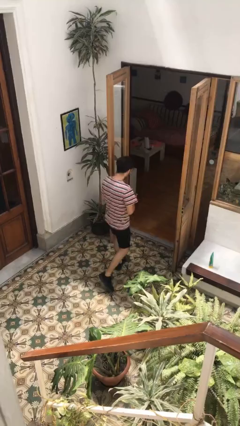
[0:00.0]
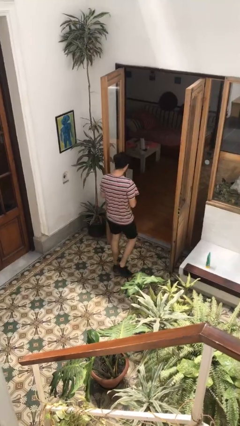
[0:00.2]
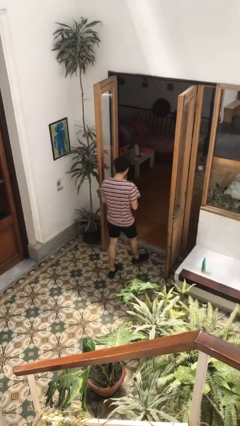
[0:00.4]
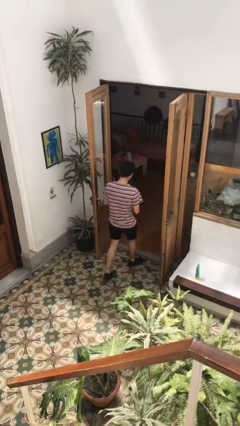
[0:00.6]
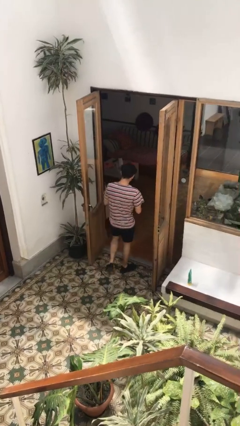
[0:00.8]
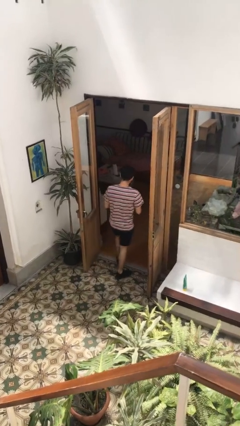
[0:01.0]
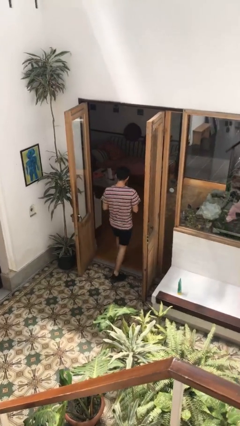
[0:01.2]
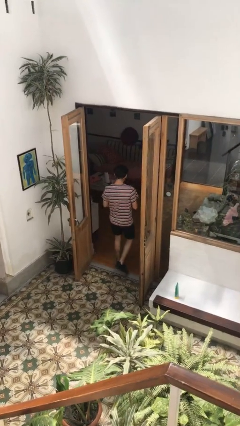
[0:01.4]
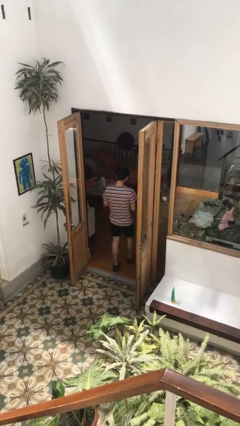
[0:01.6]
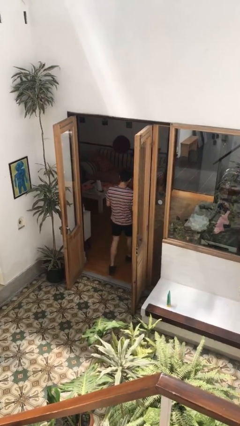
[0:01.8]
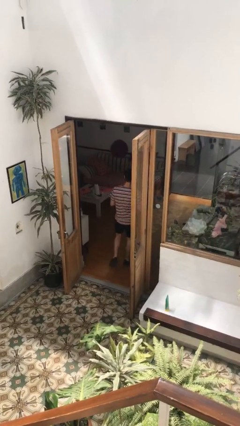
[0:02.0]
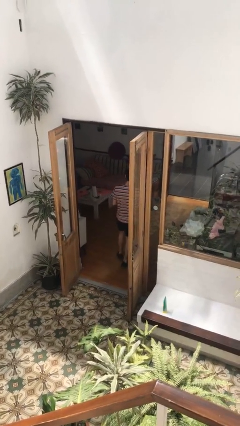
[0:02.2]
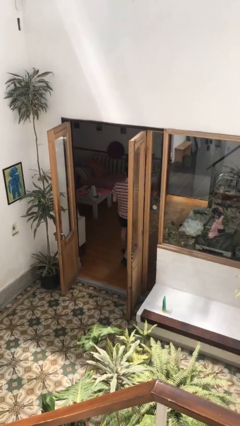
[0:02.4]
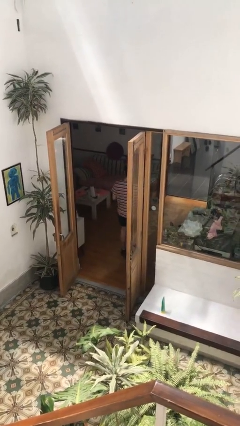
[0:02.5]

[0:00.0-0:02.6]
person exits scene through structure

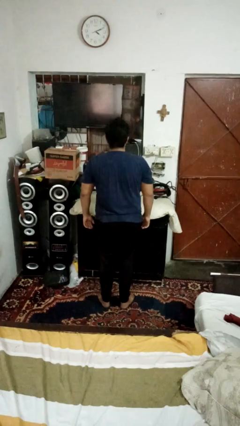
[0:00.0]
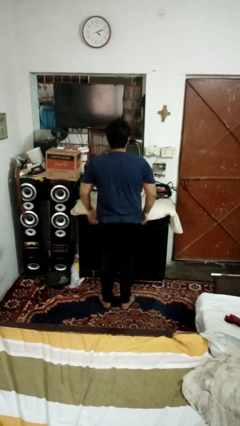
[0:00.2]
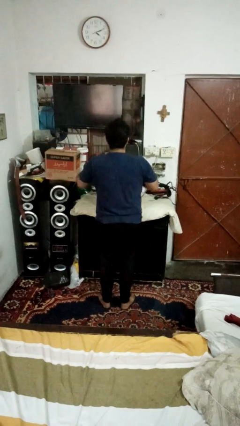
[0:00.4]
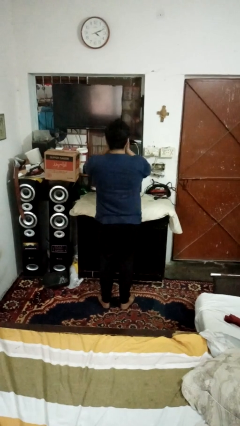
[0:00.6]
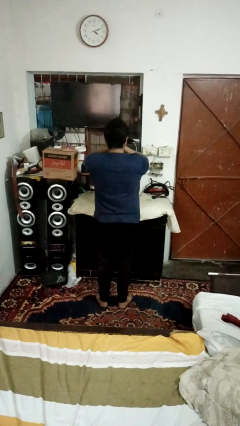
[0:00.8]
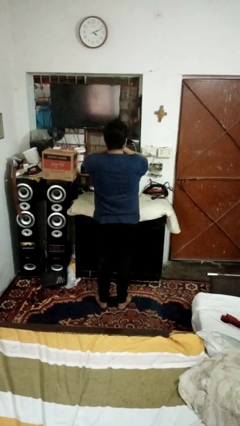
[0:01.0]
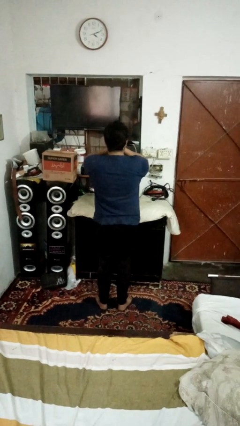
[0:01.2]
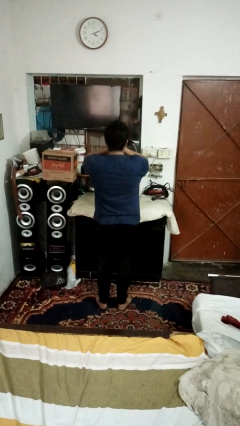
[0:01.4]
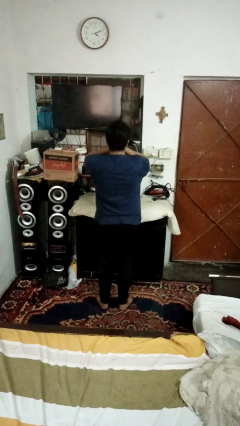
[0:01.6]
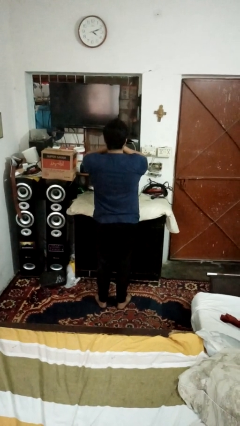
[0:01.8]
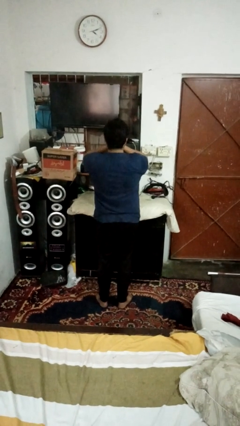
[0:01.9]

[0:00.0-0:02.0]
person covers face with hands

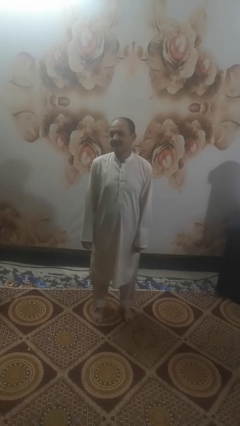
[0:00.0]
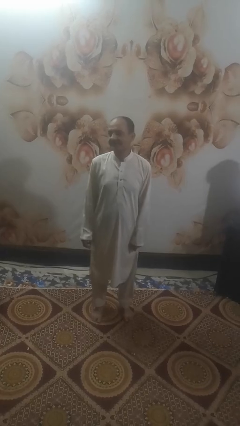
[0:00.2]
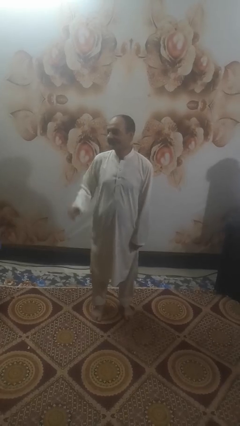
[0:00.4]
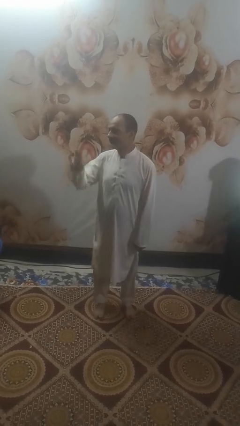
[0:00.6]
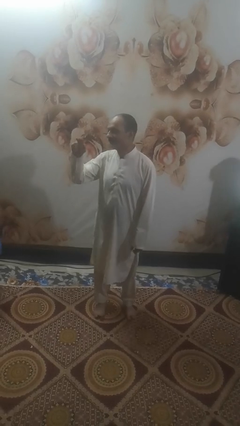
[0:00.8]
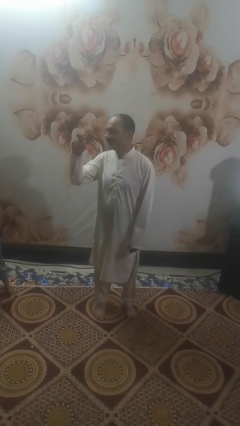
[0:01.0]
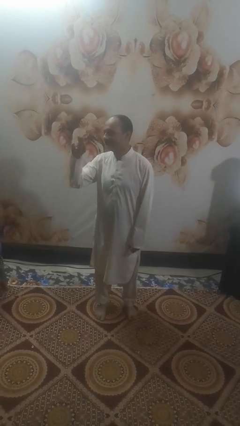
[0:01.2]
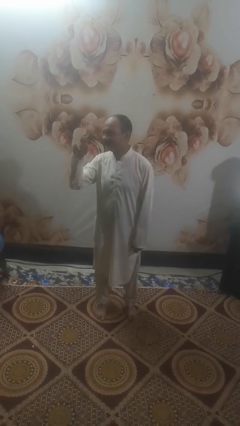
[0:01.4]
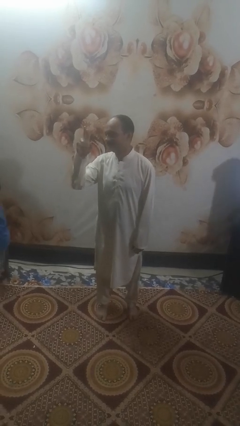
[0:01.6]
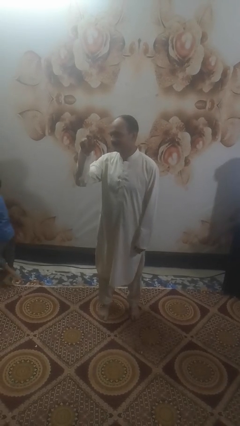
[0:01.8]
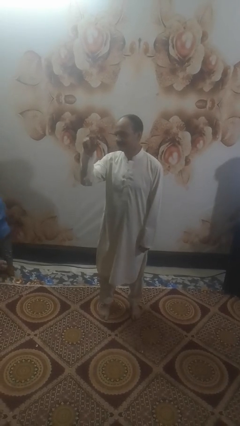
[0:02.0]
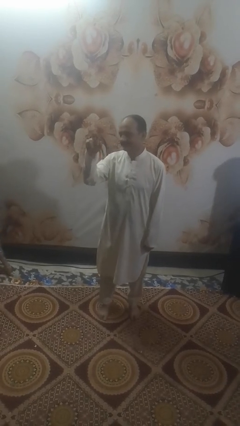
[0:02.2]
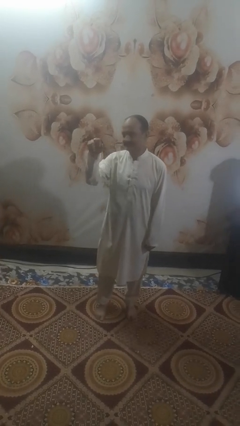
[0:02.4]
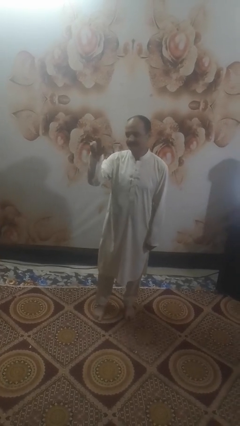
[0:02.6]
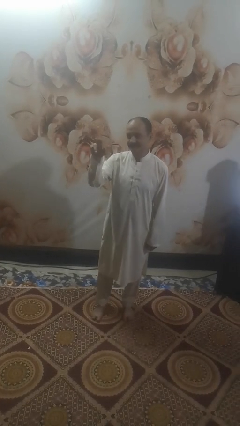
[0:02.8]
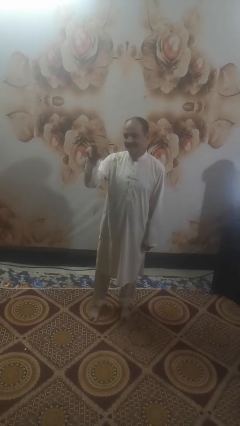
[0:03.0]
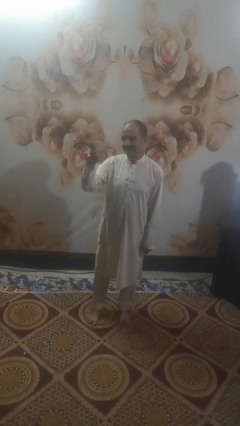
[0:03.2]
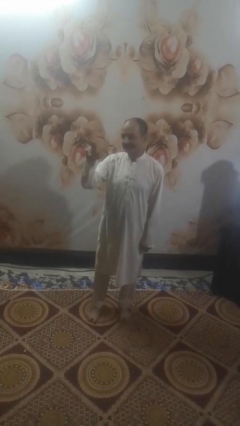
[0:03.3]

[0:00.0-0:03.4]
person gestures come here

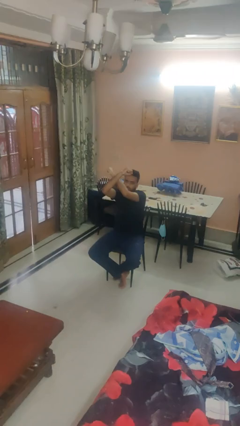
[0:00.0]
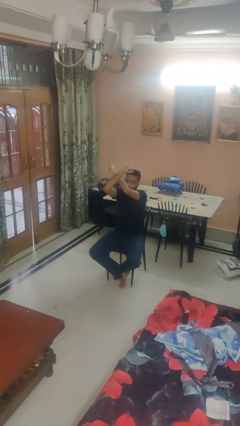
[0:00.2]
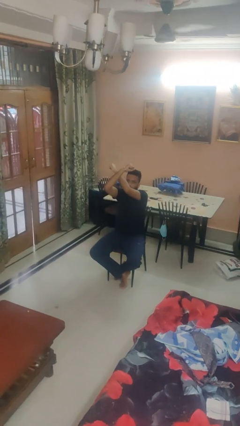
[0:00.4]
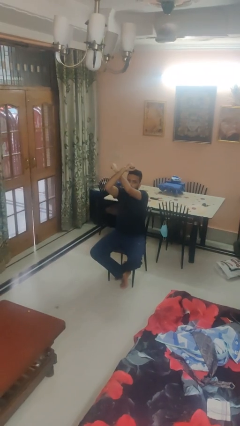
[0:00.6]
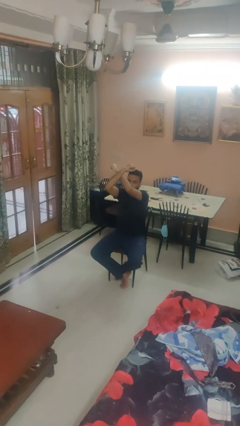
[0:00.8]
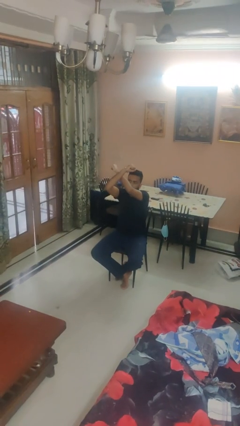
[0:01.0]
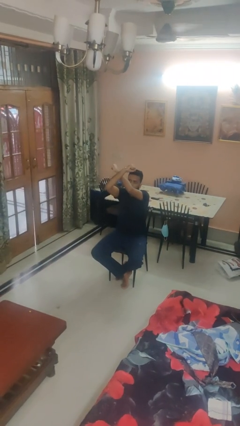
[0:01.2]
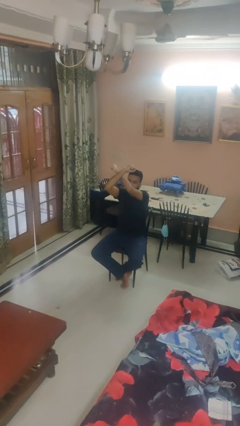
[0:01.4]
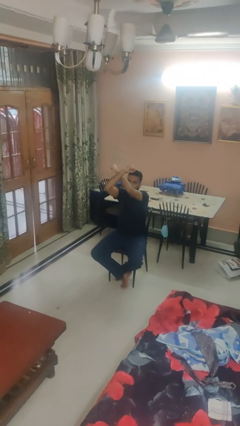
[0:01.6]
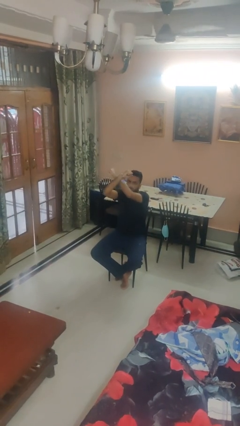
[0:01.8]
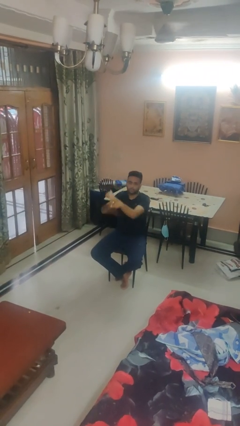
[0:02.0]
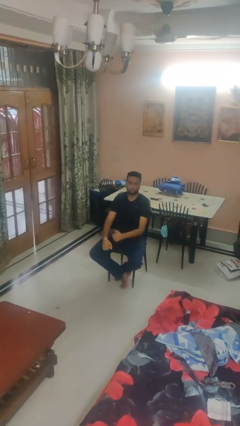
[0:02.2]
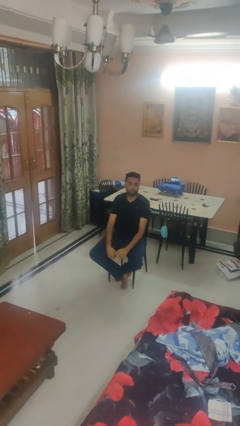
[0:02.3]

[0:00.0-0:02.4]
person gestures arms x

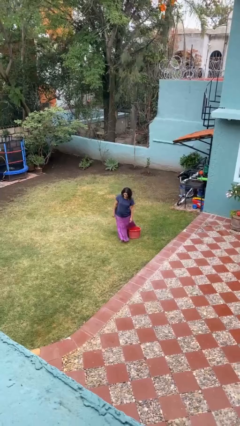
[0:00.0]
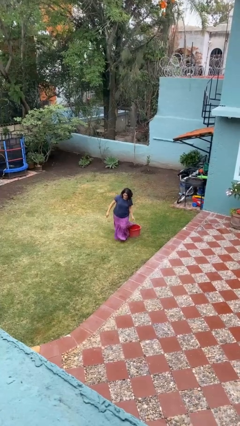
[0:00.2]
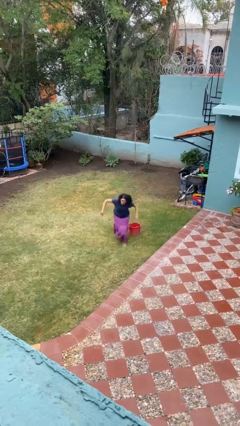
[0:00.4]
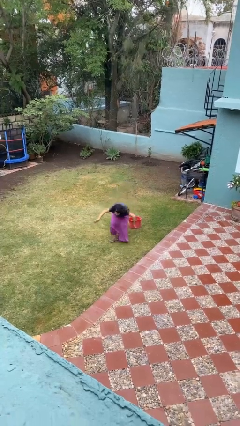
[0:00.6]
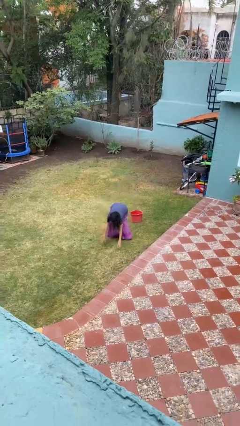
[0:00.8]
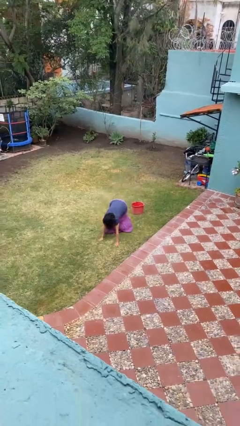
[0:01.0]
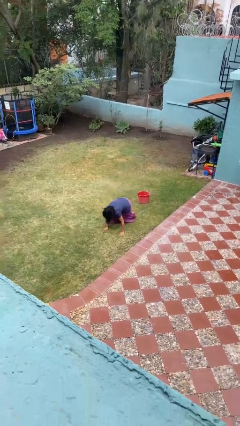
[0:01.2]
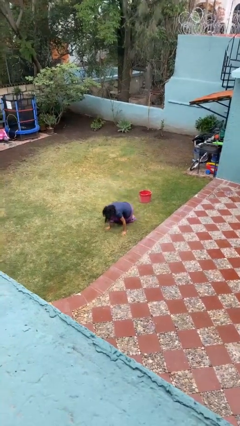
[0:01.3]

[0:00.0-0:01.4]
person trips on object on floor

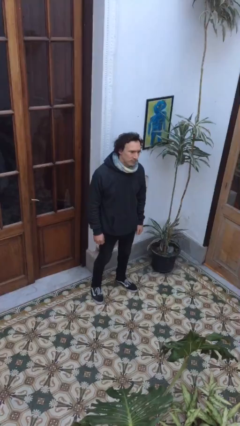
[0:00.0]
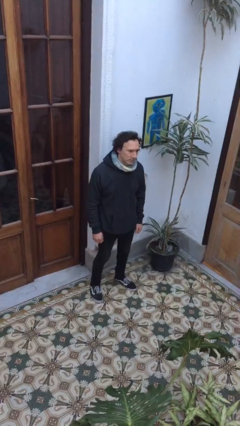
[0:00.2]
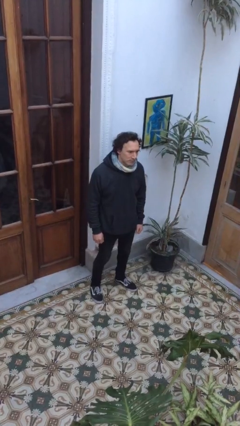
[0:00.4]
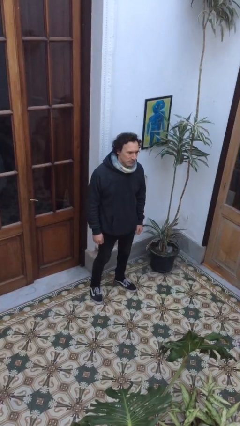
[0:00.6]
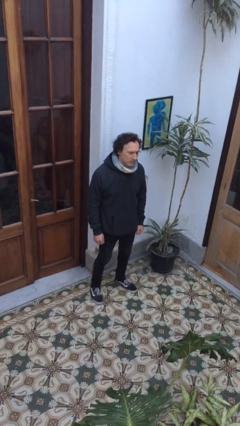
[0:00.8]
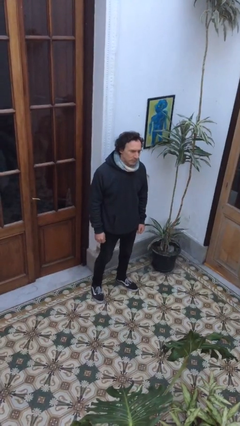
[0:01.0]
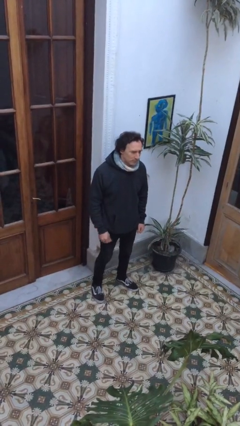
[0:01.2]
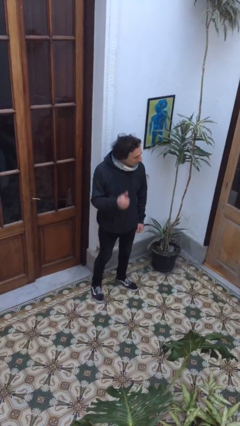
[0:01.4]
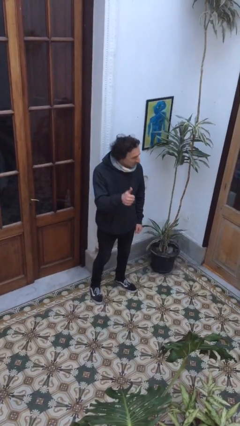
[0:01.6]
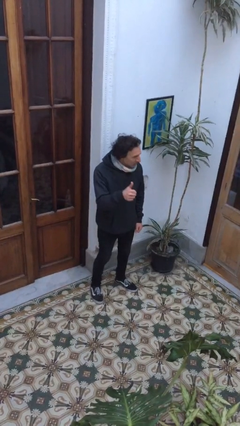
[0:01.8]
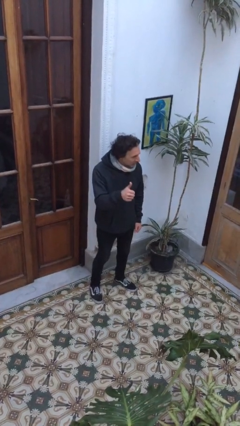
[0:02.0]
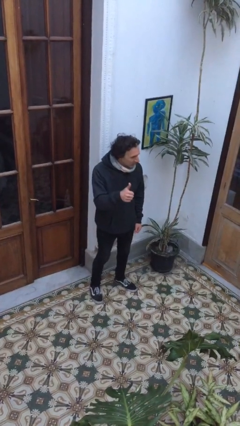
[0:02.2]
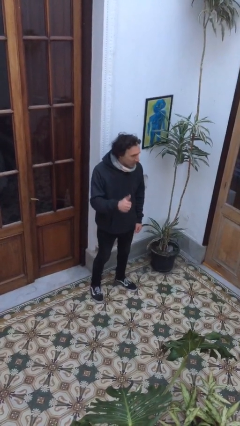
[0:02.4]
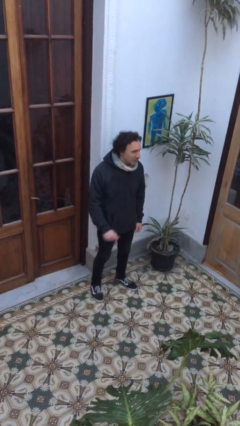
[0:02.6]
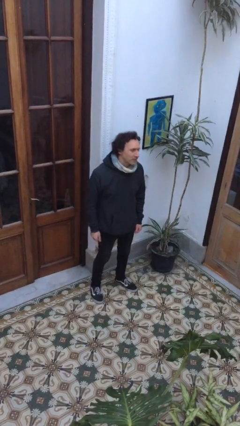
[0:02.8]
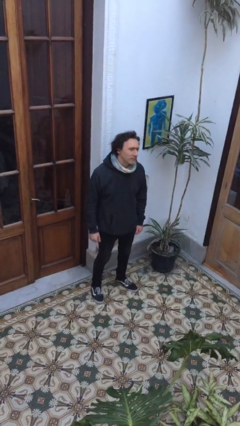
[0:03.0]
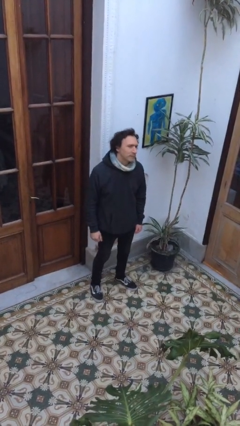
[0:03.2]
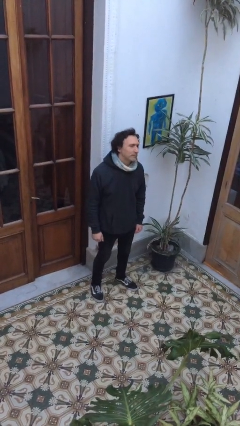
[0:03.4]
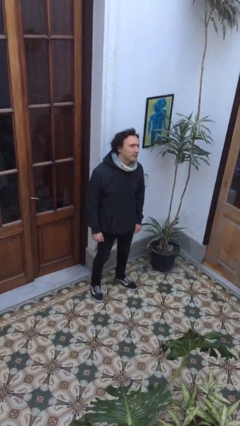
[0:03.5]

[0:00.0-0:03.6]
person gestures thumbs up

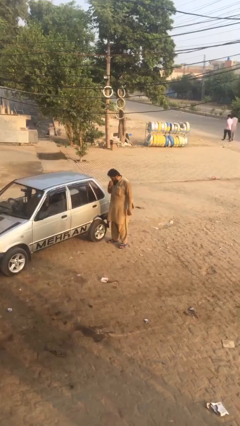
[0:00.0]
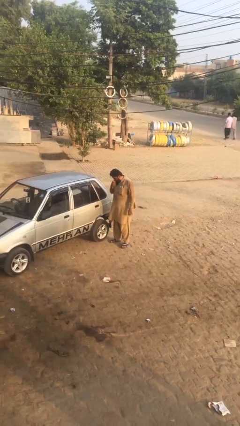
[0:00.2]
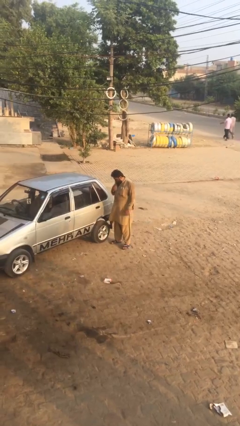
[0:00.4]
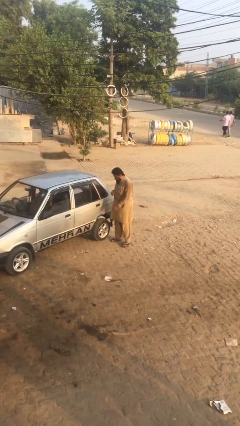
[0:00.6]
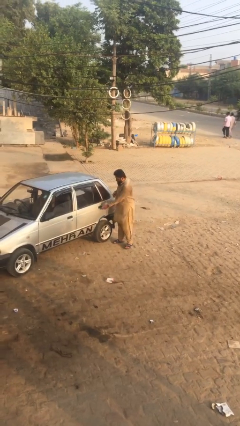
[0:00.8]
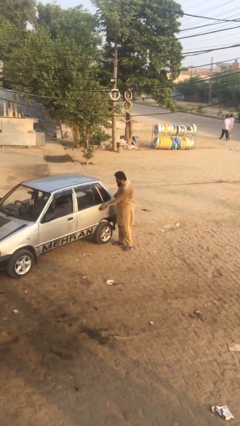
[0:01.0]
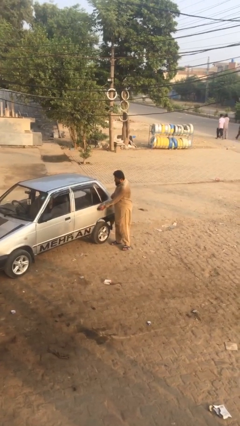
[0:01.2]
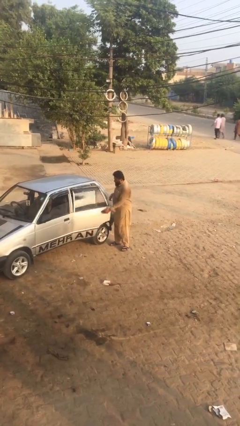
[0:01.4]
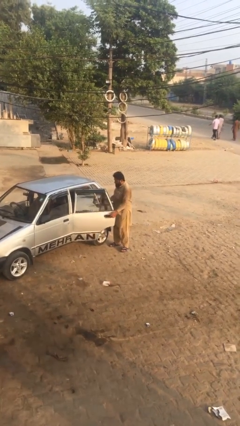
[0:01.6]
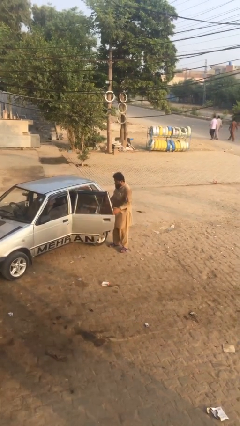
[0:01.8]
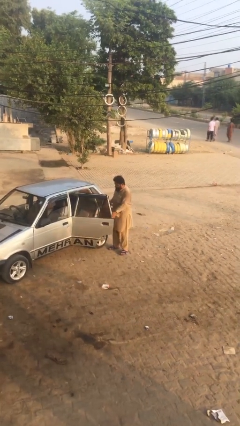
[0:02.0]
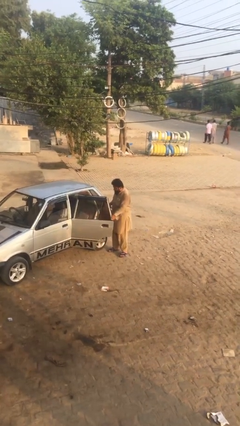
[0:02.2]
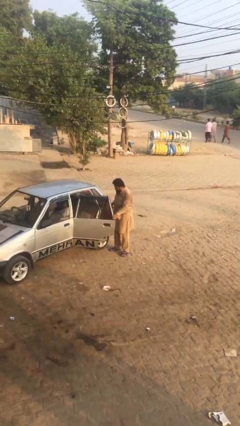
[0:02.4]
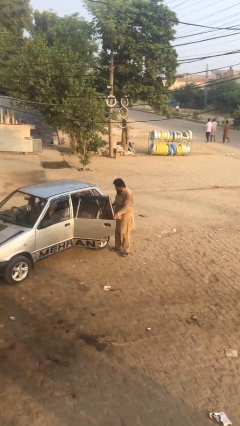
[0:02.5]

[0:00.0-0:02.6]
person opens car door
